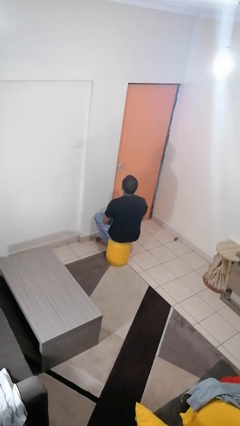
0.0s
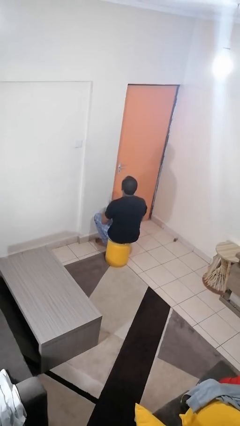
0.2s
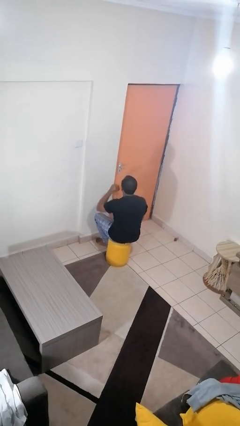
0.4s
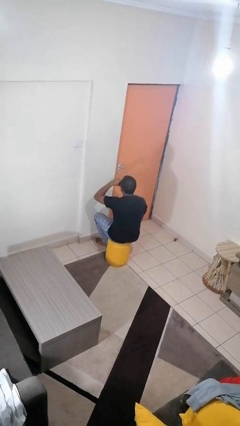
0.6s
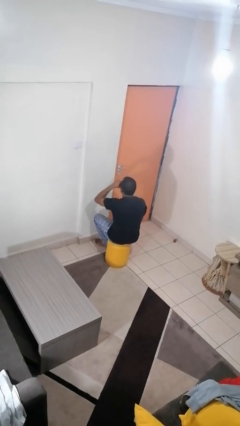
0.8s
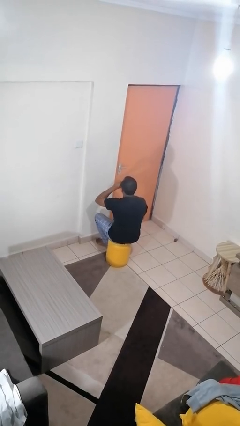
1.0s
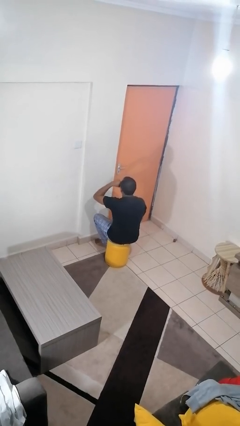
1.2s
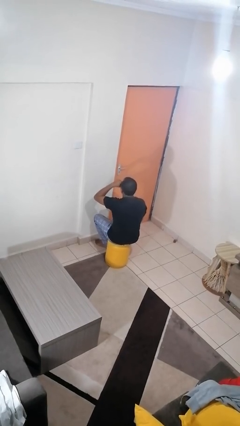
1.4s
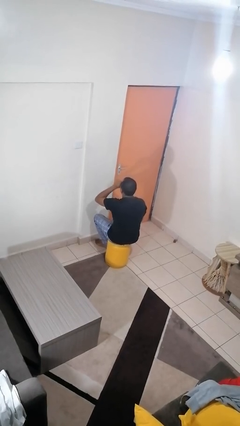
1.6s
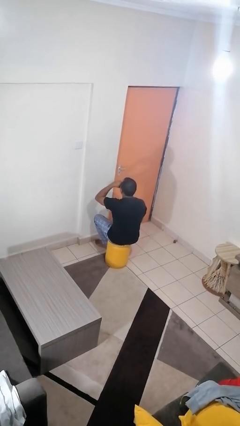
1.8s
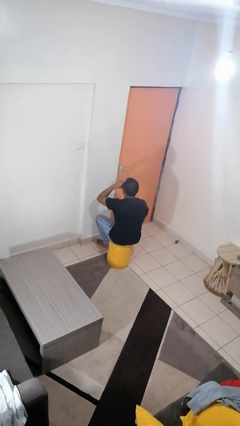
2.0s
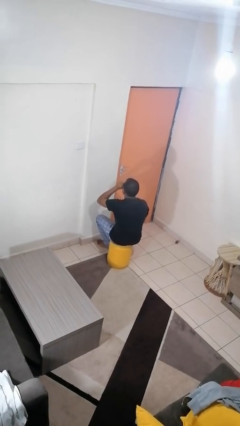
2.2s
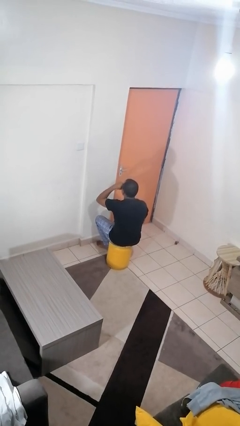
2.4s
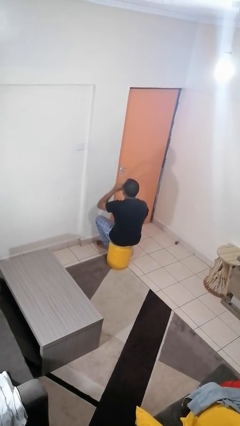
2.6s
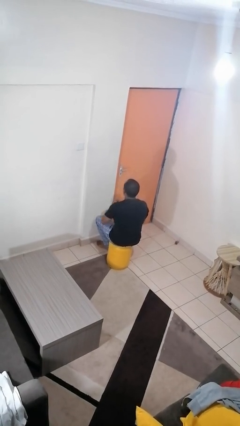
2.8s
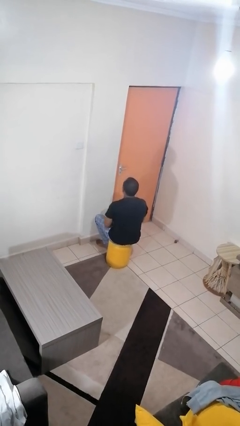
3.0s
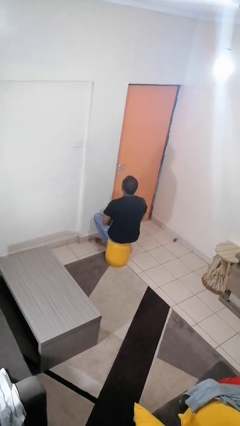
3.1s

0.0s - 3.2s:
person rubs eyes

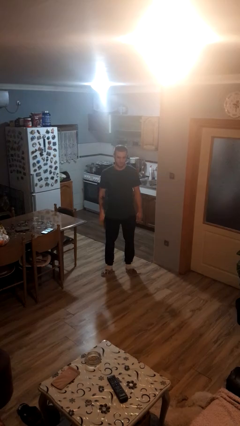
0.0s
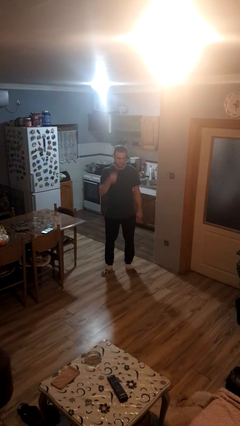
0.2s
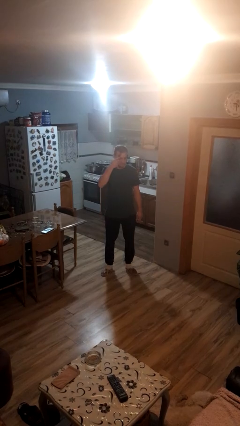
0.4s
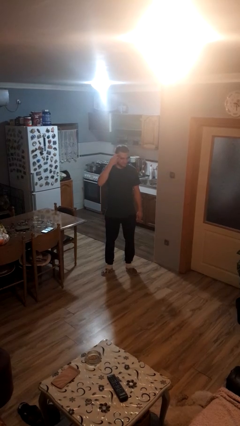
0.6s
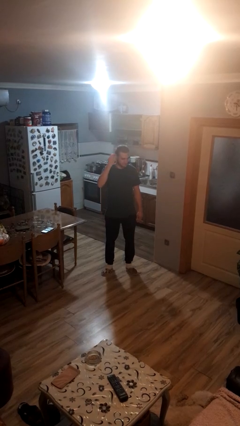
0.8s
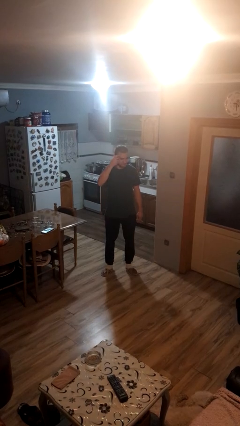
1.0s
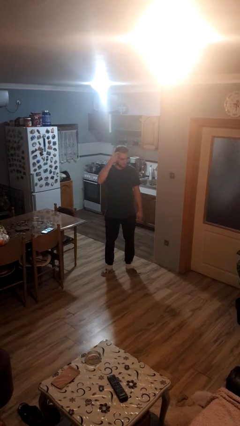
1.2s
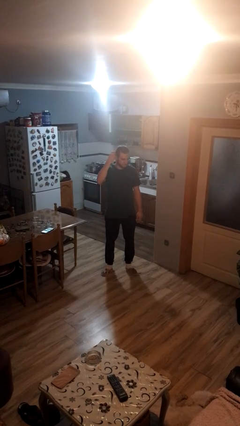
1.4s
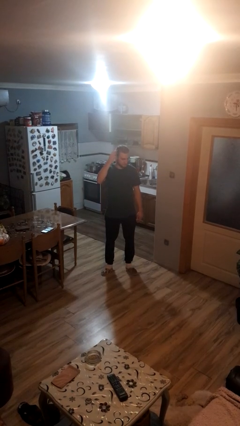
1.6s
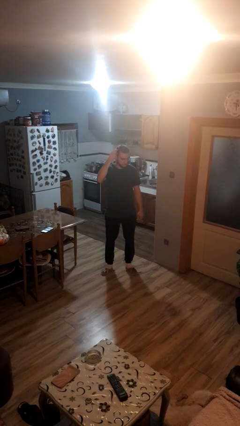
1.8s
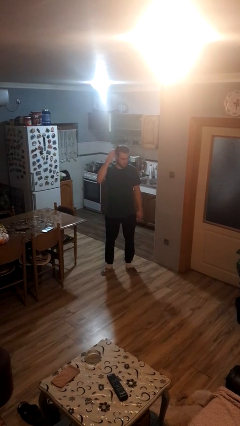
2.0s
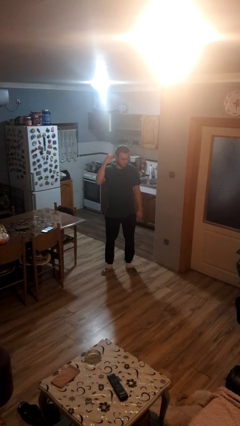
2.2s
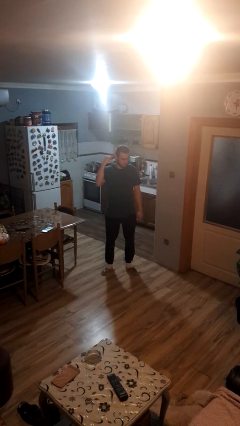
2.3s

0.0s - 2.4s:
person brushes hair

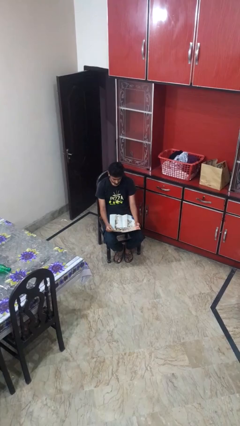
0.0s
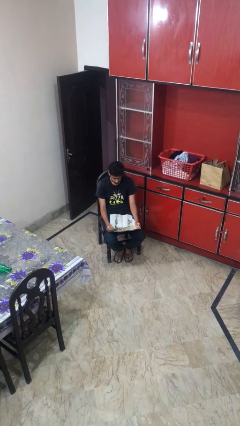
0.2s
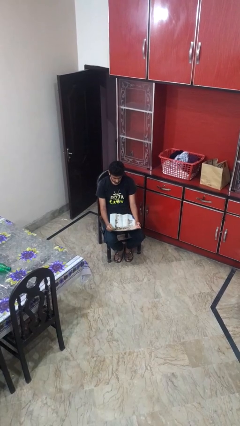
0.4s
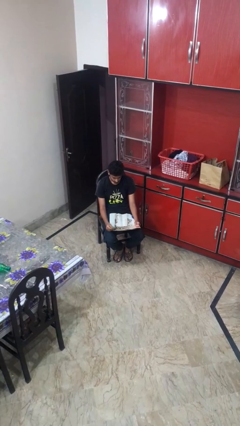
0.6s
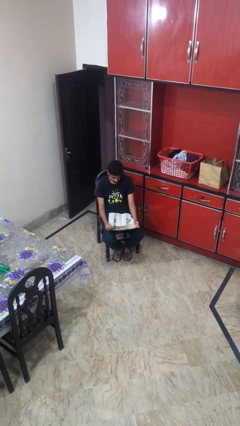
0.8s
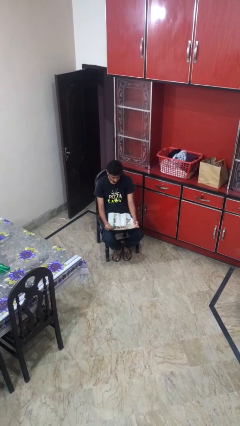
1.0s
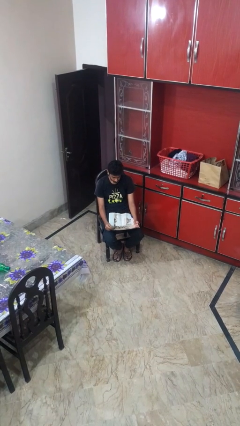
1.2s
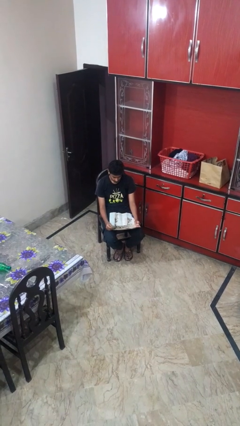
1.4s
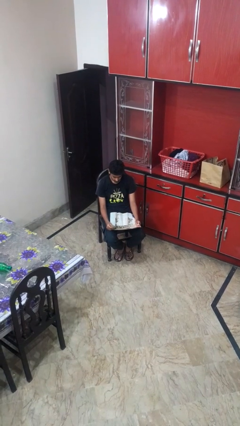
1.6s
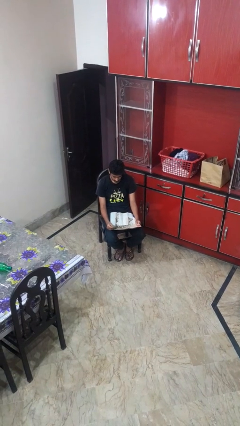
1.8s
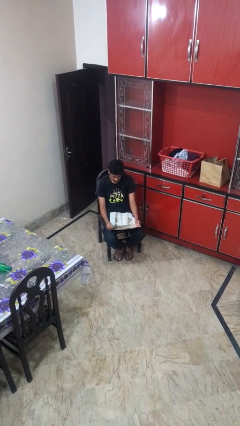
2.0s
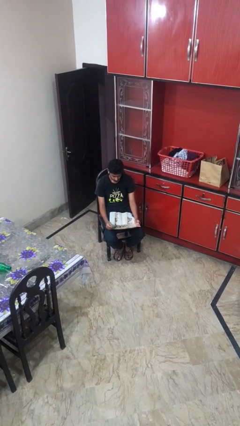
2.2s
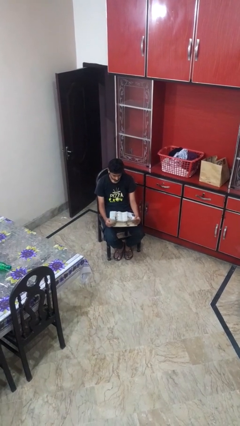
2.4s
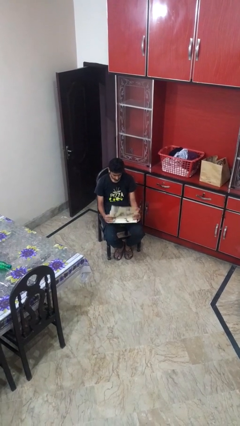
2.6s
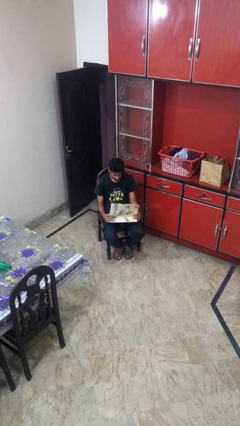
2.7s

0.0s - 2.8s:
person reads newspaper

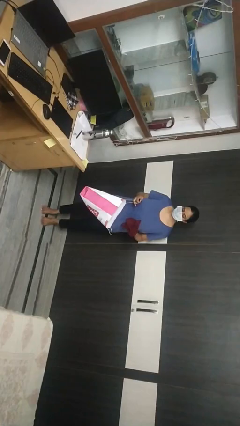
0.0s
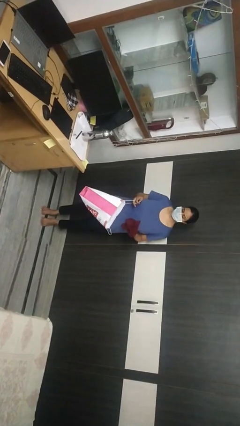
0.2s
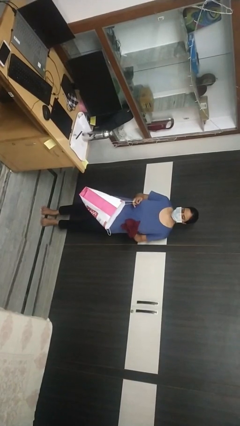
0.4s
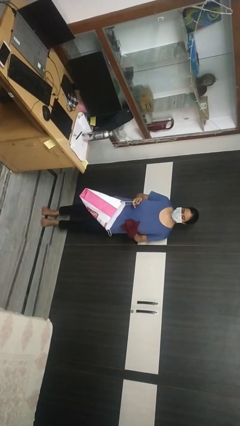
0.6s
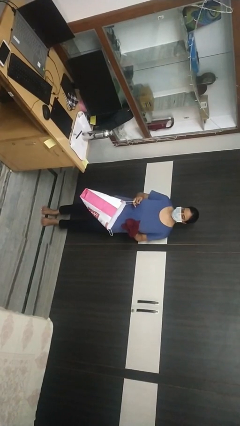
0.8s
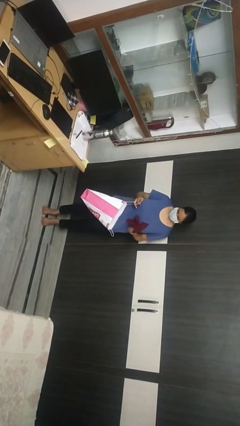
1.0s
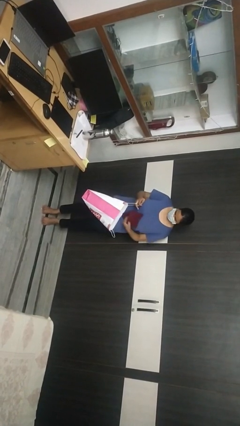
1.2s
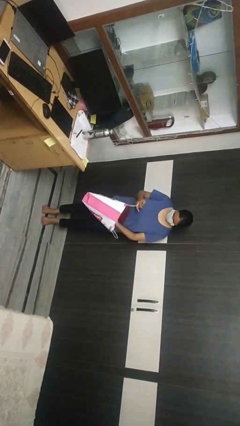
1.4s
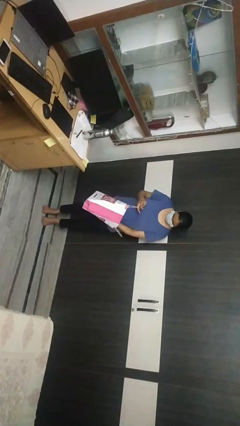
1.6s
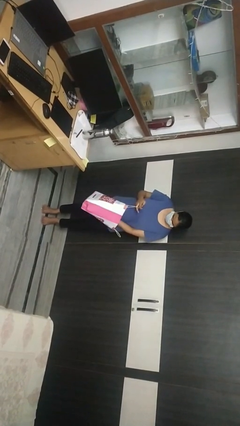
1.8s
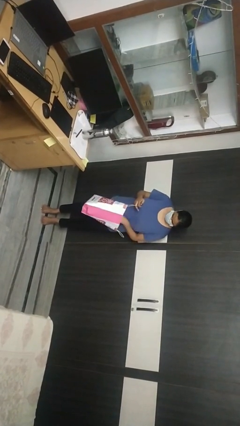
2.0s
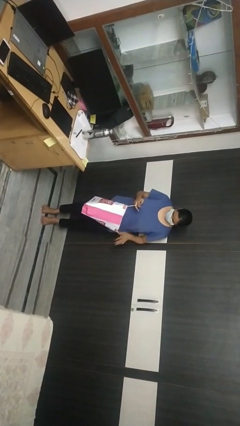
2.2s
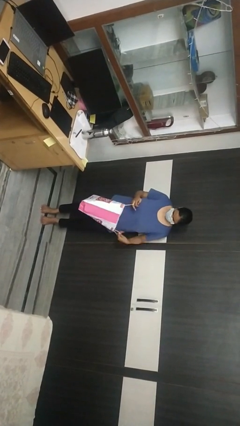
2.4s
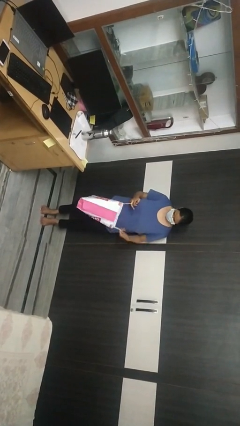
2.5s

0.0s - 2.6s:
person puts object into bag

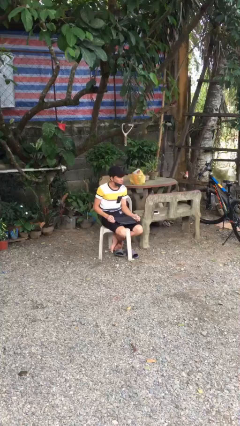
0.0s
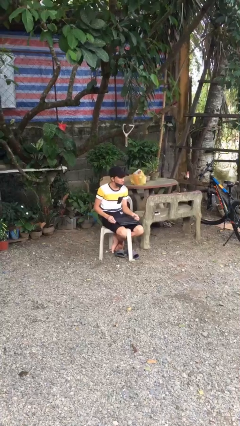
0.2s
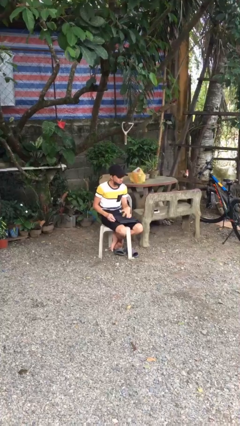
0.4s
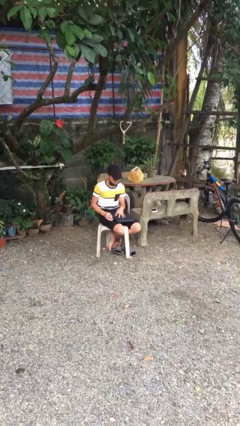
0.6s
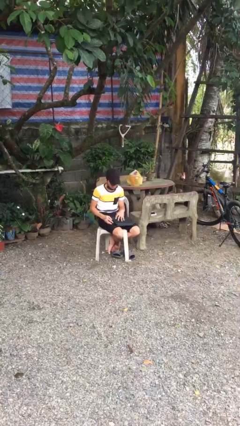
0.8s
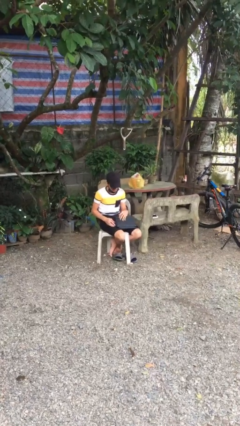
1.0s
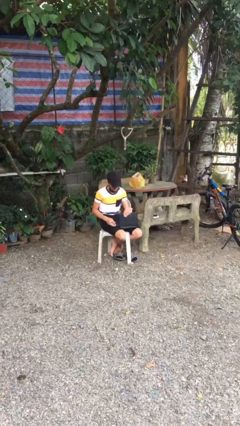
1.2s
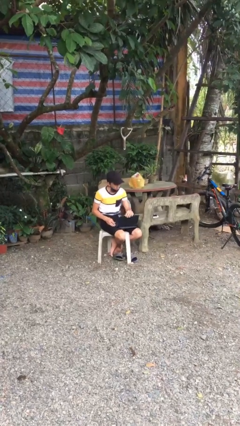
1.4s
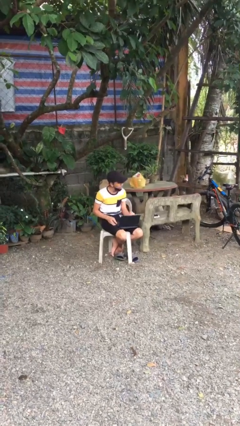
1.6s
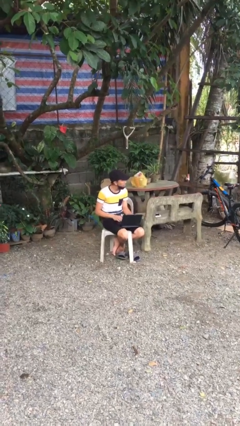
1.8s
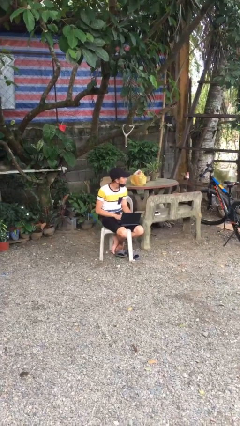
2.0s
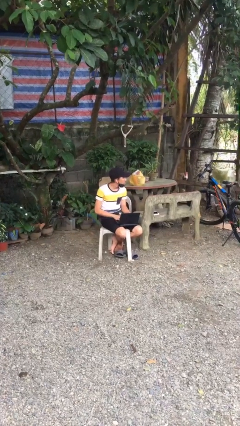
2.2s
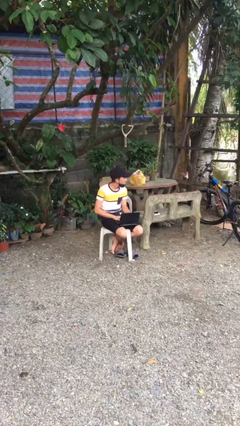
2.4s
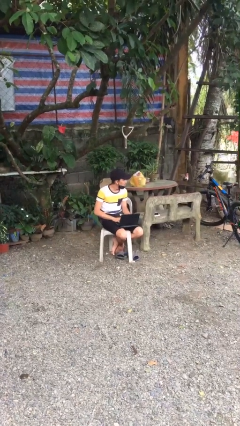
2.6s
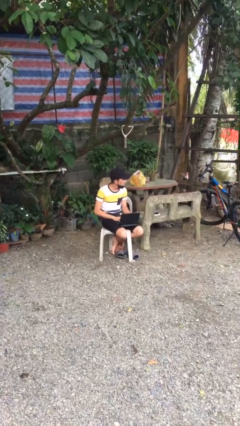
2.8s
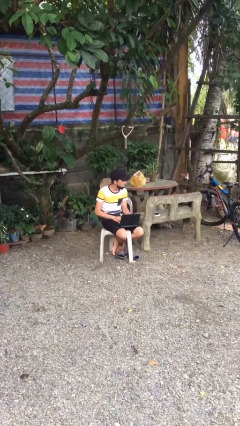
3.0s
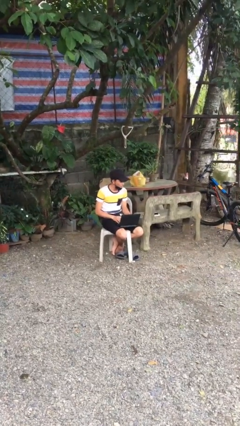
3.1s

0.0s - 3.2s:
person interacts with laptop

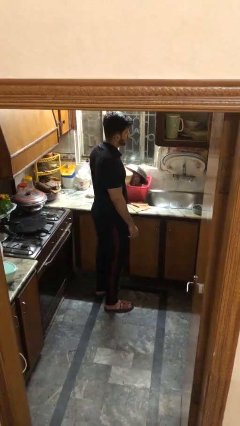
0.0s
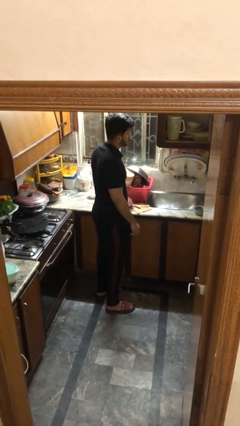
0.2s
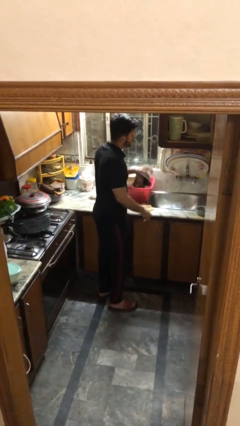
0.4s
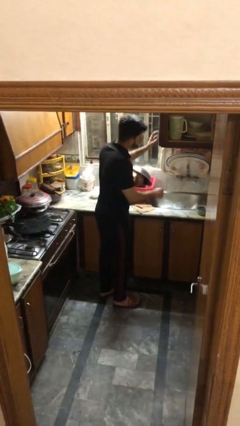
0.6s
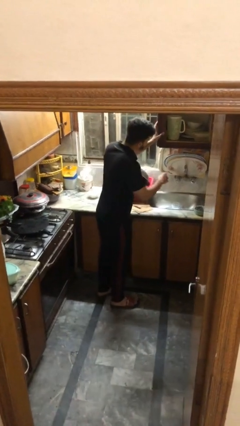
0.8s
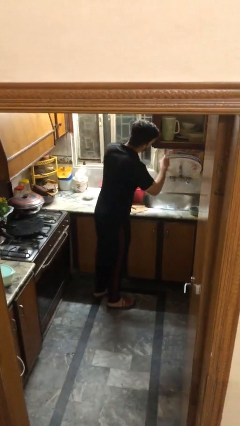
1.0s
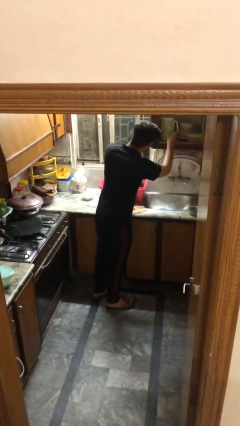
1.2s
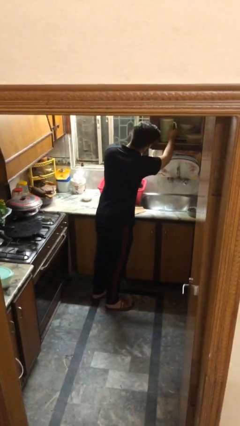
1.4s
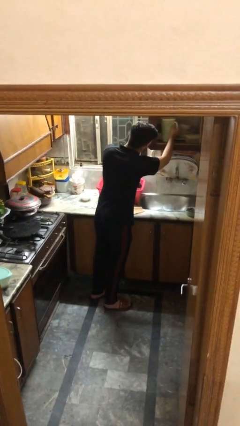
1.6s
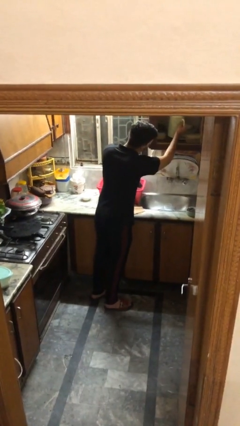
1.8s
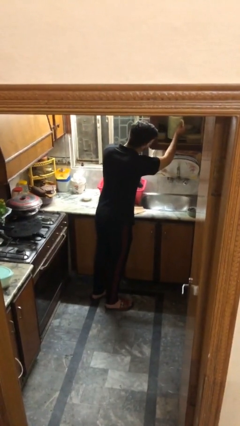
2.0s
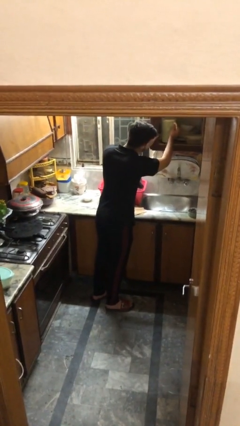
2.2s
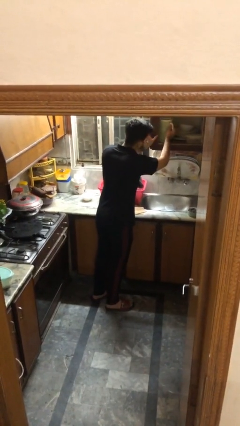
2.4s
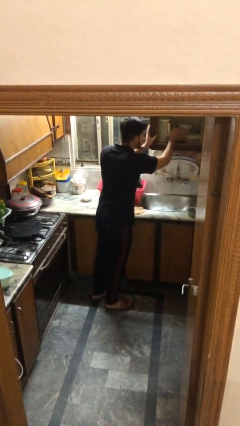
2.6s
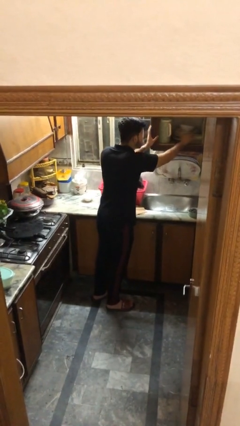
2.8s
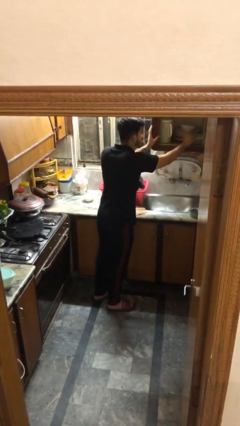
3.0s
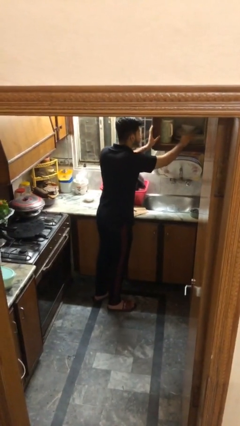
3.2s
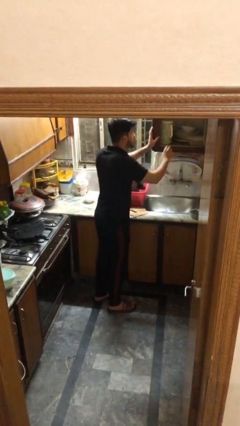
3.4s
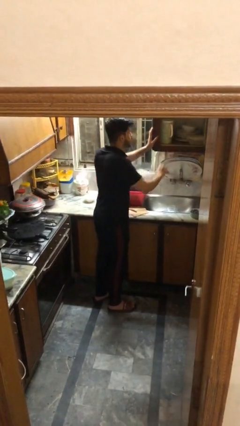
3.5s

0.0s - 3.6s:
person searches in kitchen drawer
